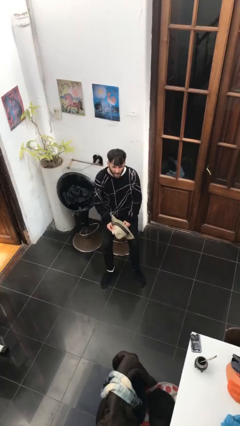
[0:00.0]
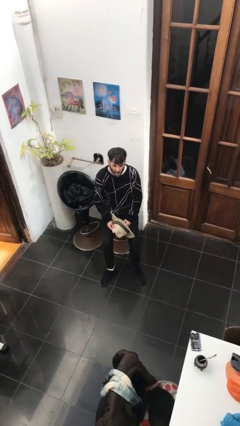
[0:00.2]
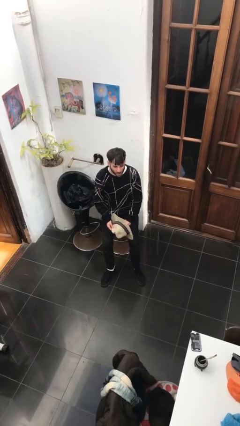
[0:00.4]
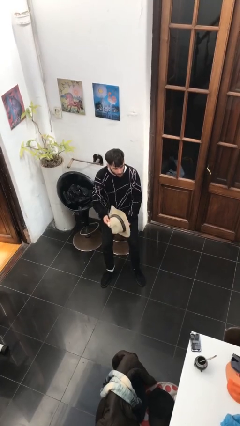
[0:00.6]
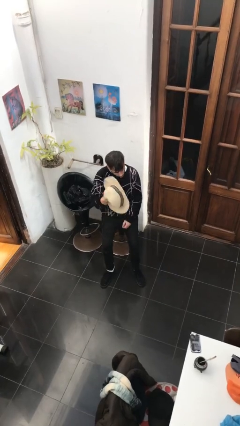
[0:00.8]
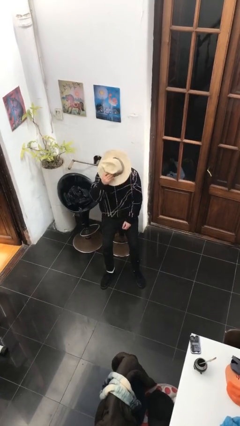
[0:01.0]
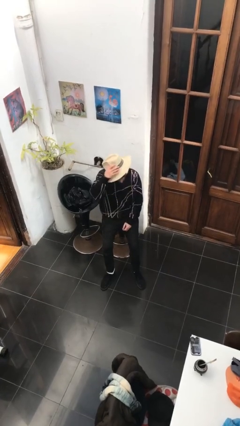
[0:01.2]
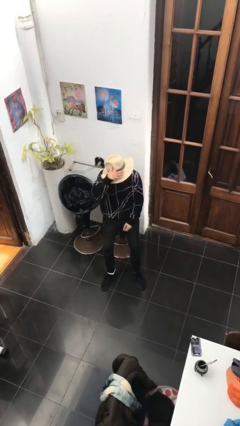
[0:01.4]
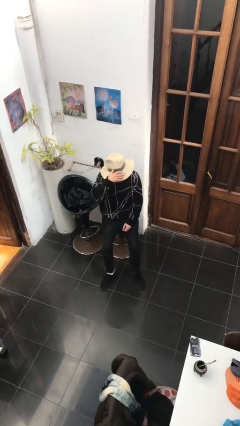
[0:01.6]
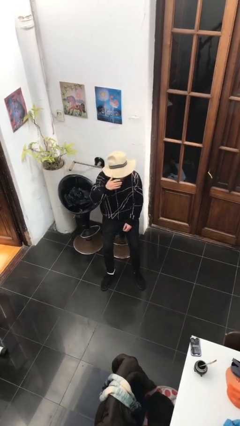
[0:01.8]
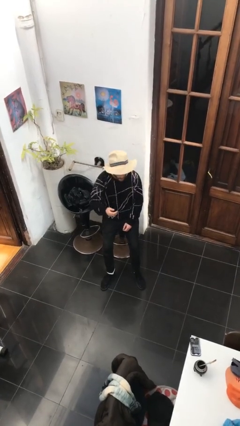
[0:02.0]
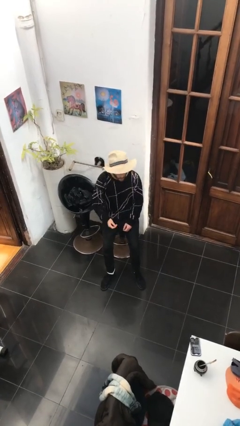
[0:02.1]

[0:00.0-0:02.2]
person puts on hat

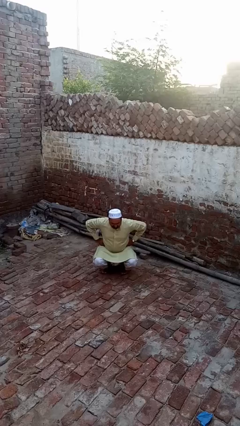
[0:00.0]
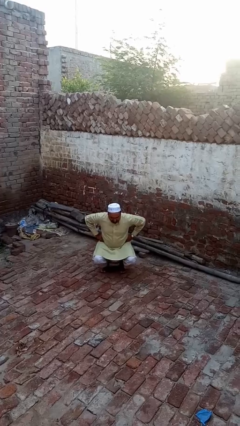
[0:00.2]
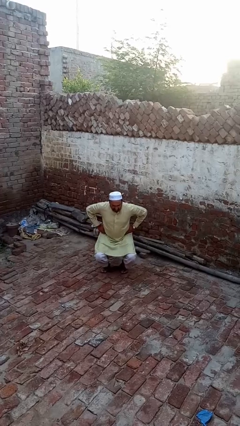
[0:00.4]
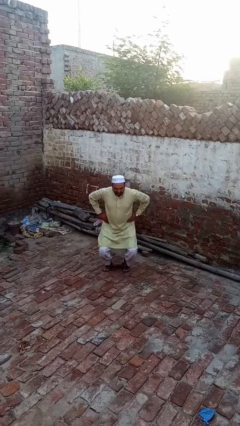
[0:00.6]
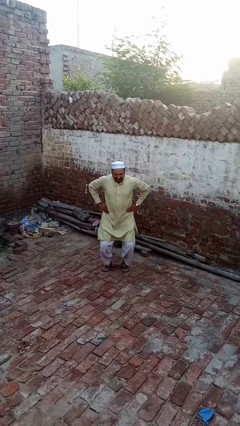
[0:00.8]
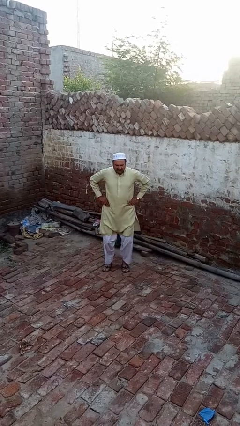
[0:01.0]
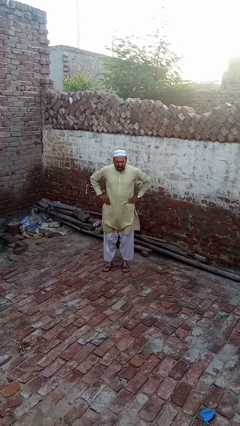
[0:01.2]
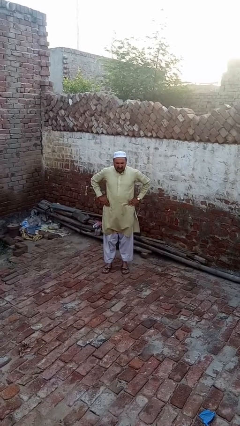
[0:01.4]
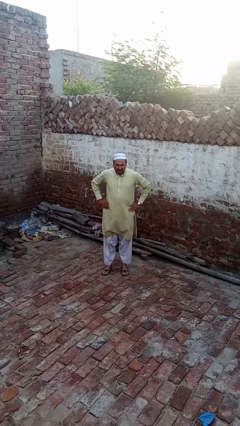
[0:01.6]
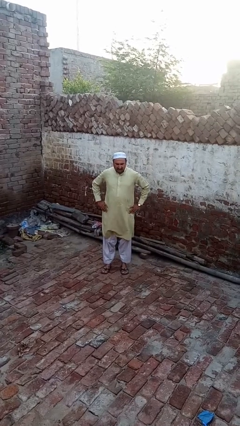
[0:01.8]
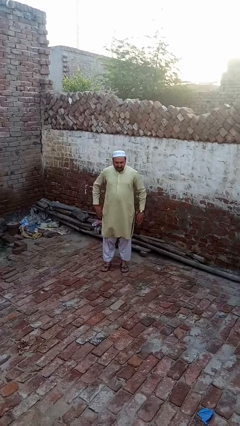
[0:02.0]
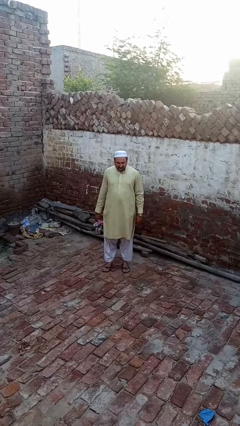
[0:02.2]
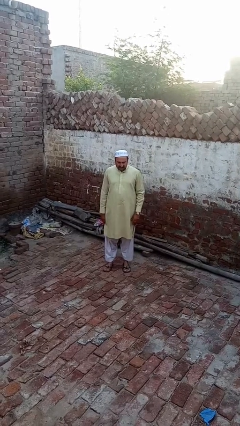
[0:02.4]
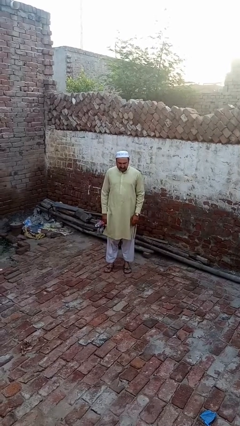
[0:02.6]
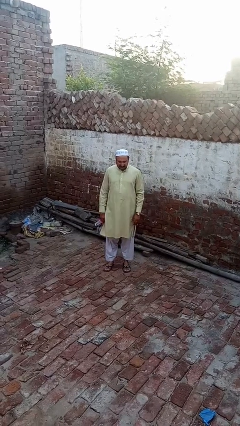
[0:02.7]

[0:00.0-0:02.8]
person stands up

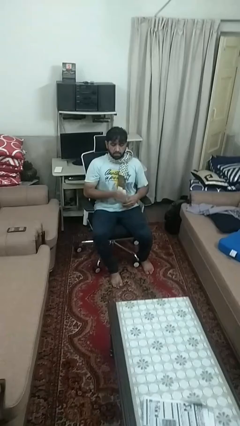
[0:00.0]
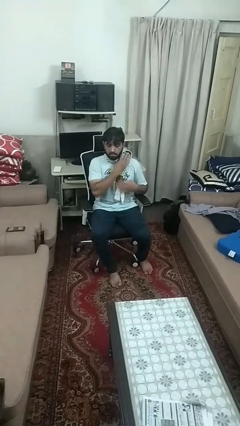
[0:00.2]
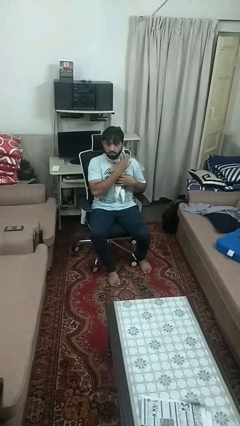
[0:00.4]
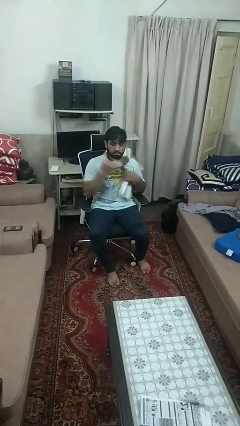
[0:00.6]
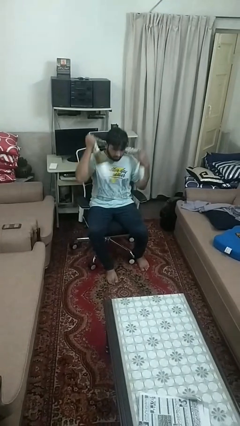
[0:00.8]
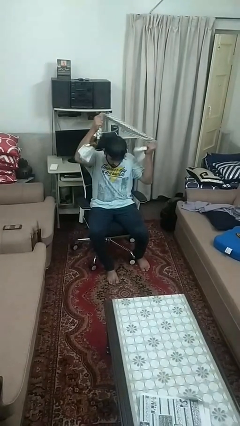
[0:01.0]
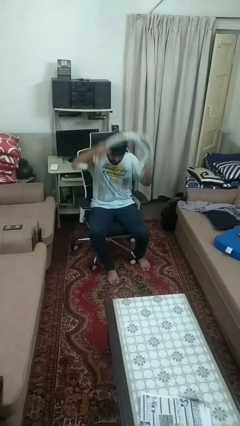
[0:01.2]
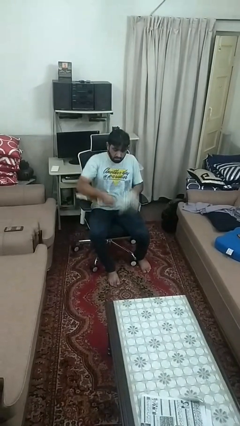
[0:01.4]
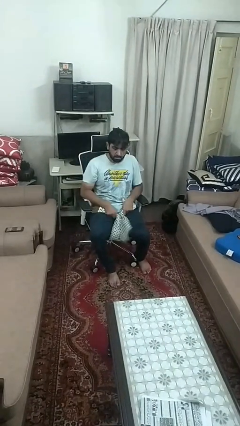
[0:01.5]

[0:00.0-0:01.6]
person takes off scarf

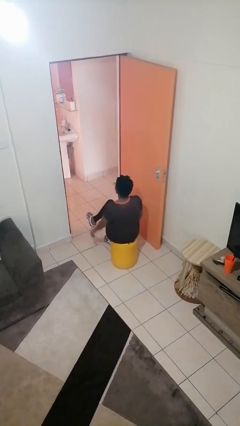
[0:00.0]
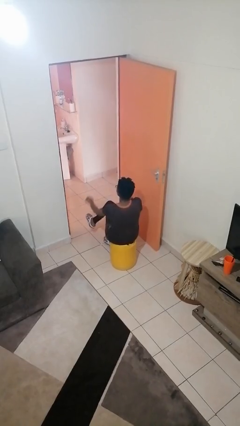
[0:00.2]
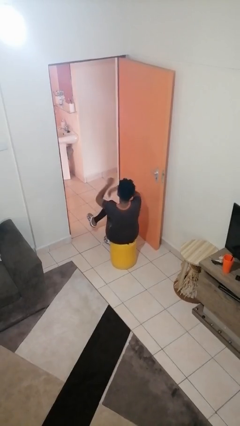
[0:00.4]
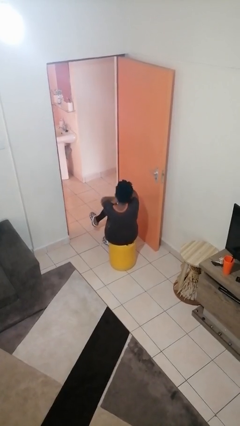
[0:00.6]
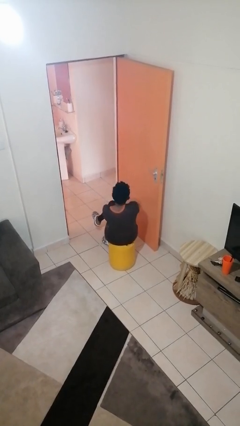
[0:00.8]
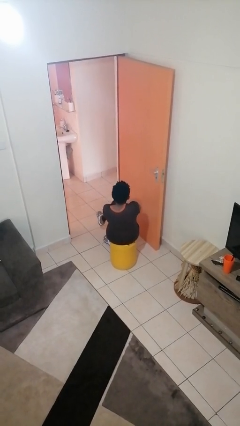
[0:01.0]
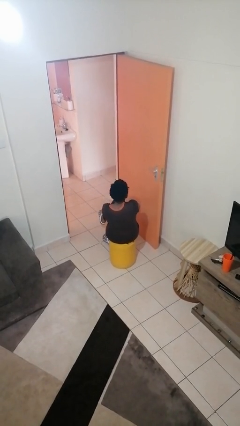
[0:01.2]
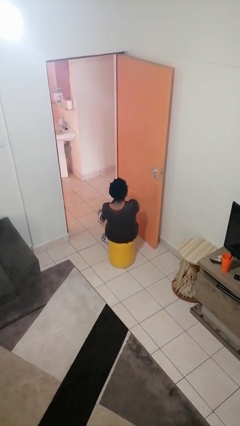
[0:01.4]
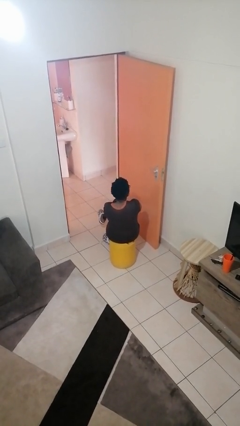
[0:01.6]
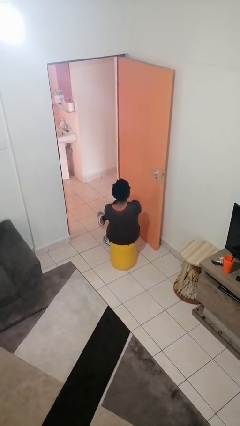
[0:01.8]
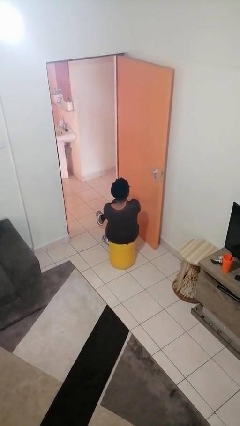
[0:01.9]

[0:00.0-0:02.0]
person crosses arms

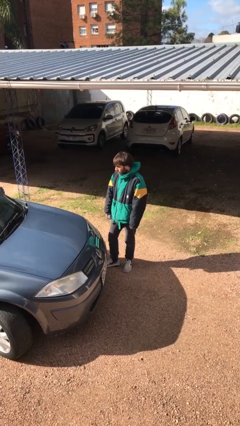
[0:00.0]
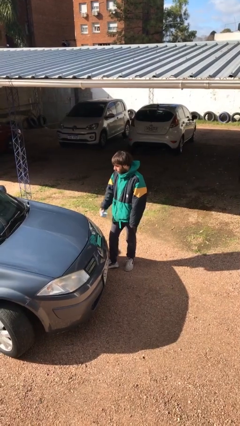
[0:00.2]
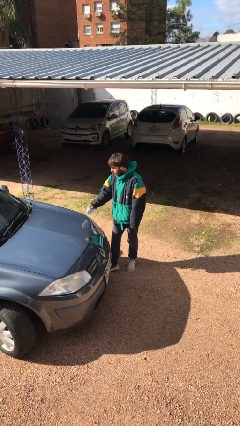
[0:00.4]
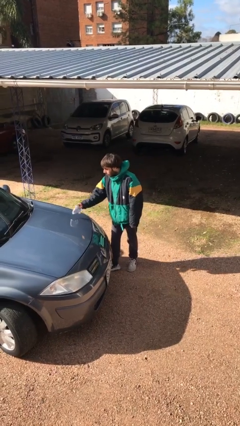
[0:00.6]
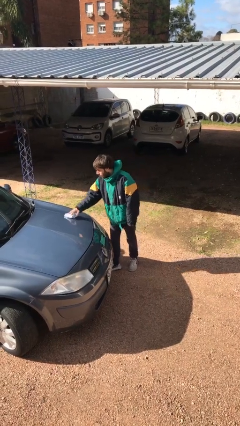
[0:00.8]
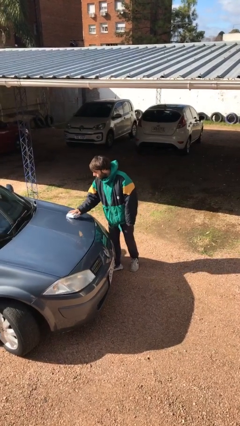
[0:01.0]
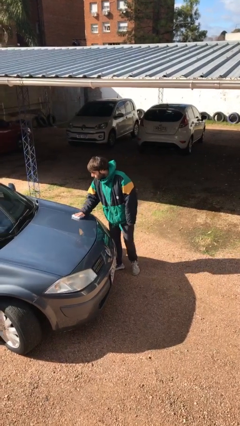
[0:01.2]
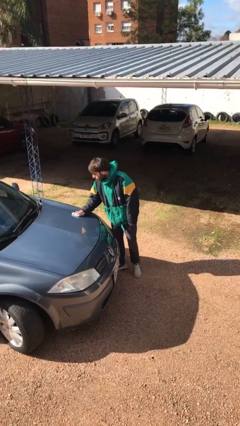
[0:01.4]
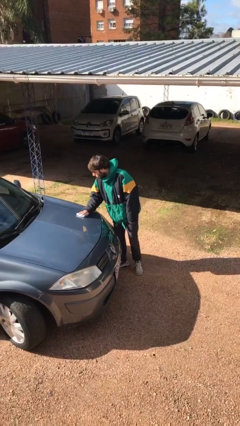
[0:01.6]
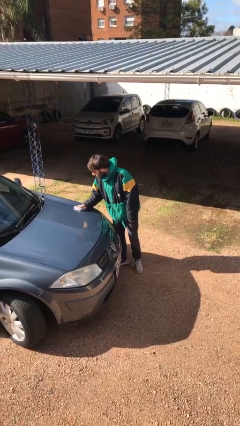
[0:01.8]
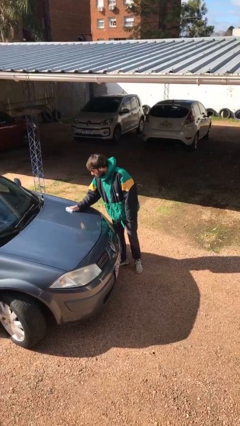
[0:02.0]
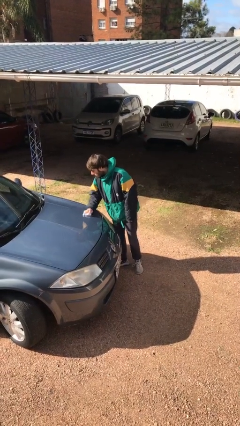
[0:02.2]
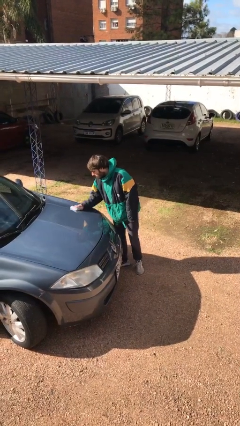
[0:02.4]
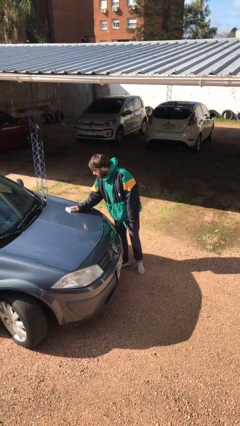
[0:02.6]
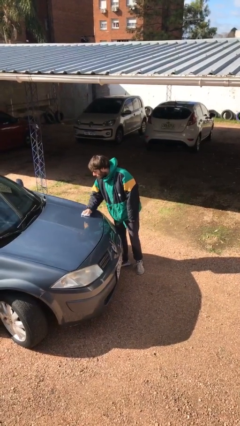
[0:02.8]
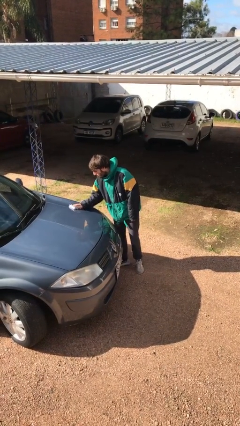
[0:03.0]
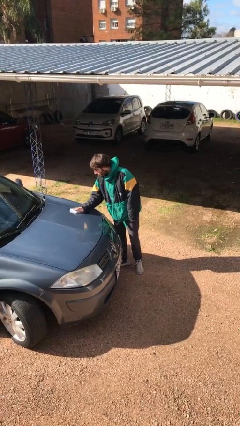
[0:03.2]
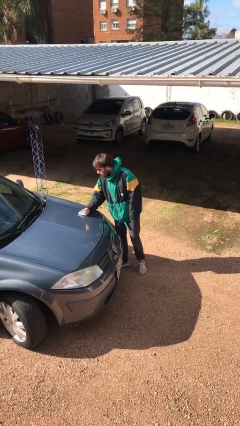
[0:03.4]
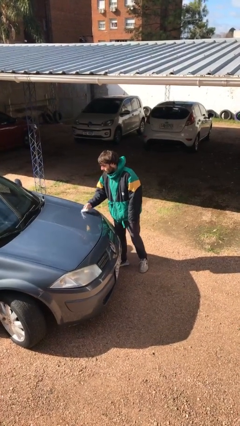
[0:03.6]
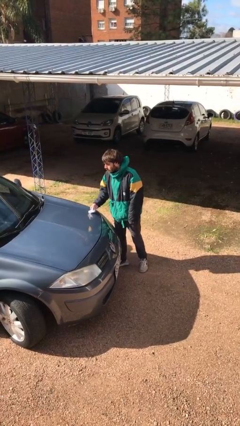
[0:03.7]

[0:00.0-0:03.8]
person polishes car with rag

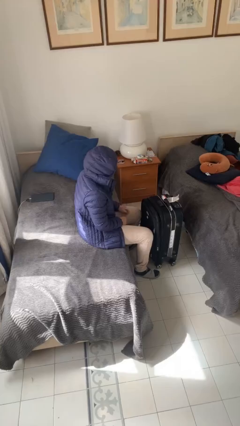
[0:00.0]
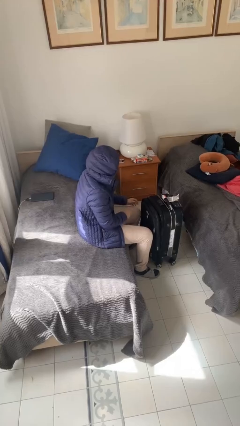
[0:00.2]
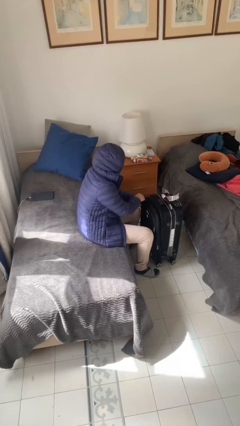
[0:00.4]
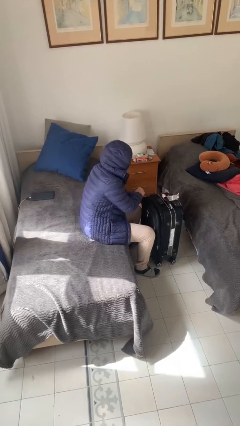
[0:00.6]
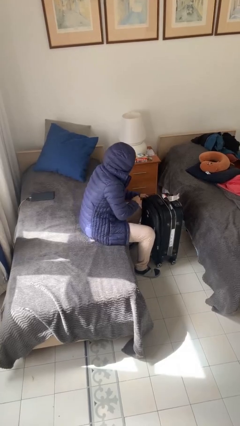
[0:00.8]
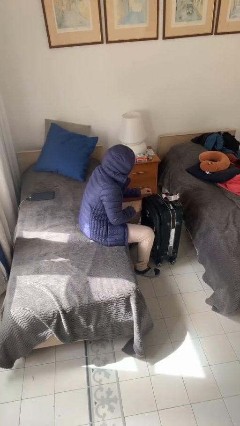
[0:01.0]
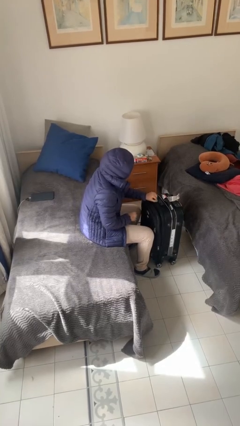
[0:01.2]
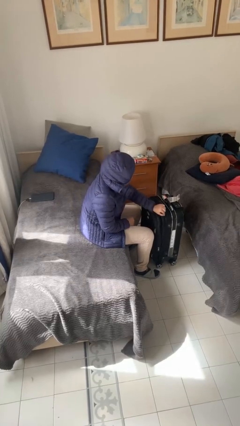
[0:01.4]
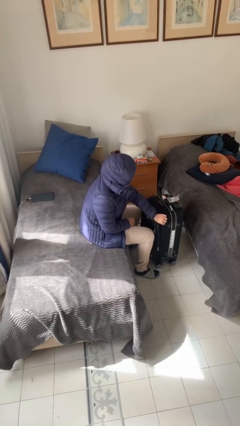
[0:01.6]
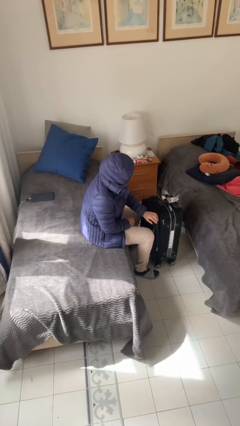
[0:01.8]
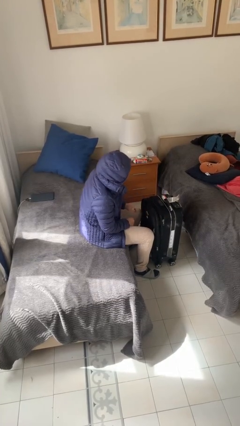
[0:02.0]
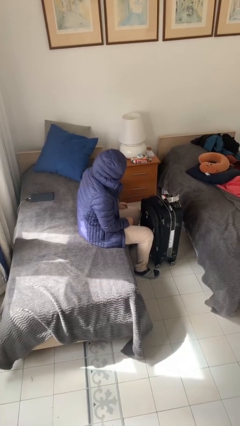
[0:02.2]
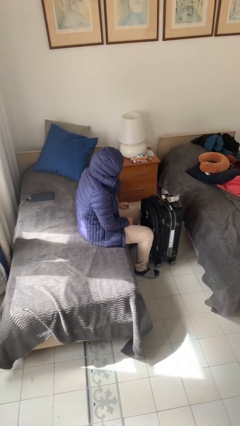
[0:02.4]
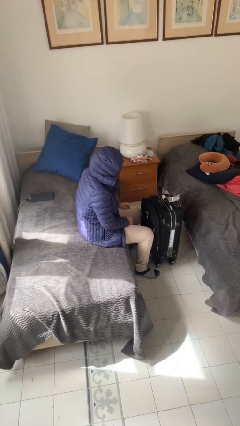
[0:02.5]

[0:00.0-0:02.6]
person opens suitcase

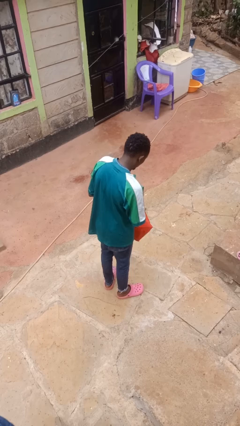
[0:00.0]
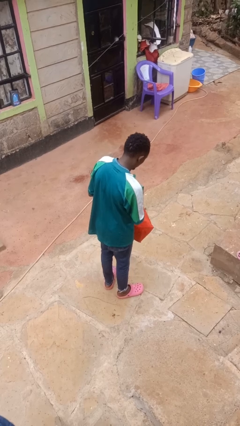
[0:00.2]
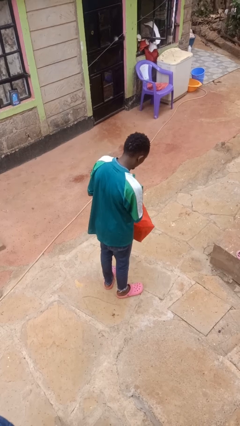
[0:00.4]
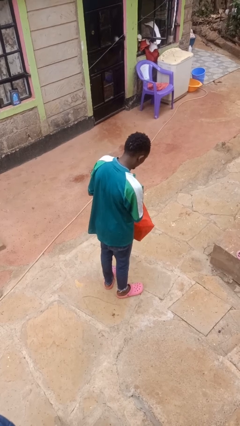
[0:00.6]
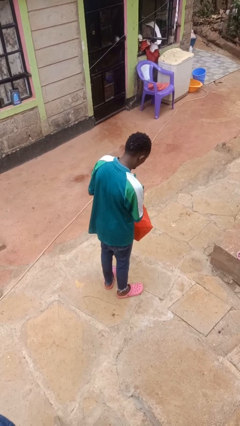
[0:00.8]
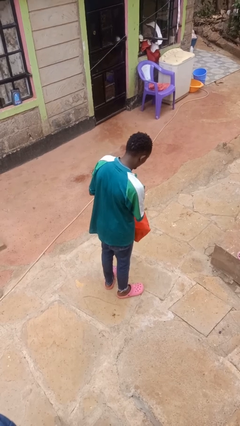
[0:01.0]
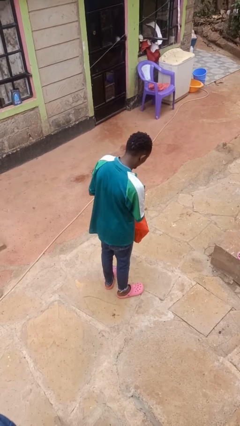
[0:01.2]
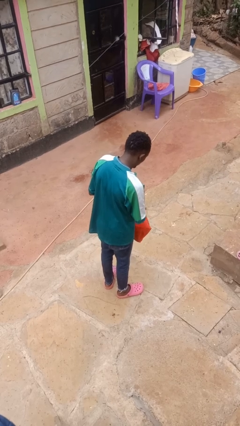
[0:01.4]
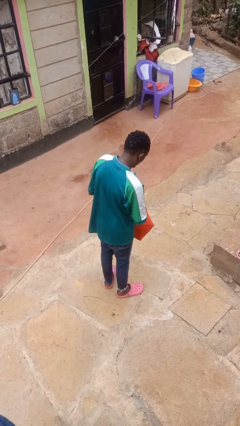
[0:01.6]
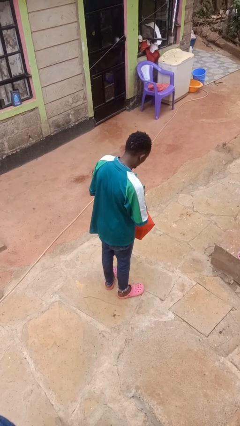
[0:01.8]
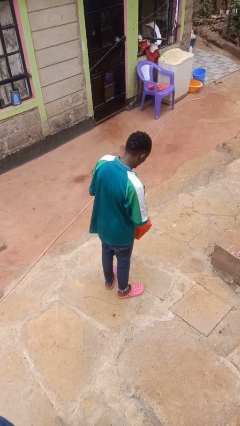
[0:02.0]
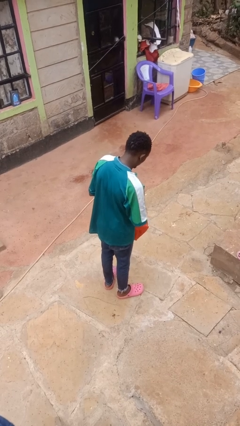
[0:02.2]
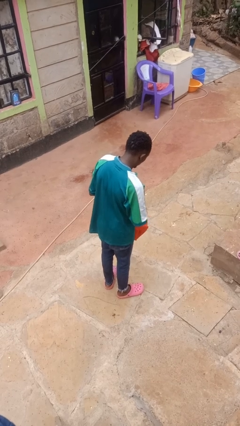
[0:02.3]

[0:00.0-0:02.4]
person puts object into bag
